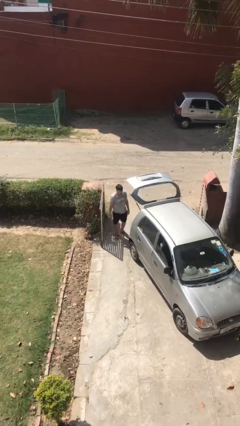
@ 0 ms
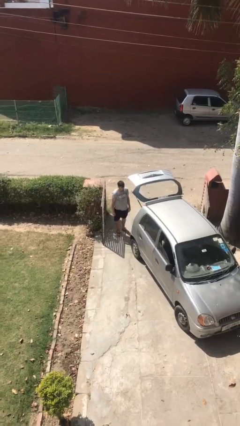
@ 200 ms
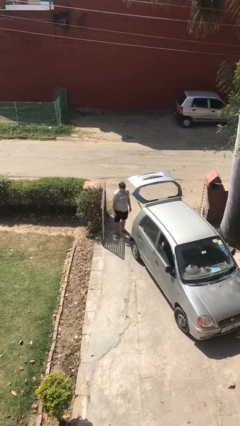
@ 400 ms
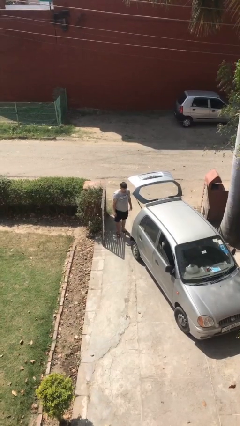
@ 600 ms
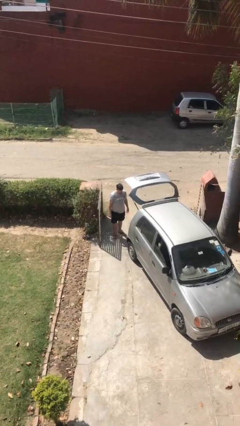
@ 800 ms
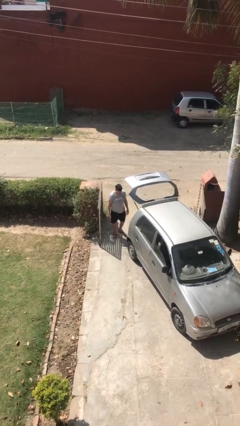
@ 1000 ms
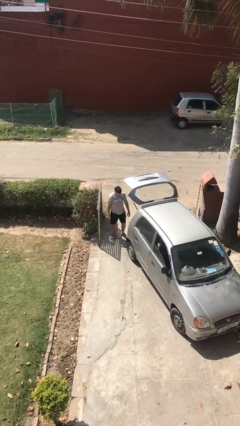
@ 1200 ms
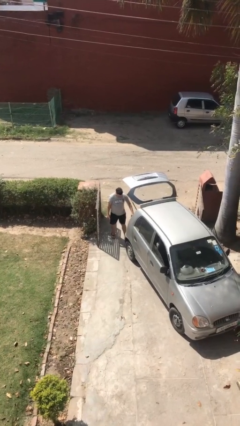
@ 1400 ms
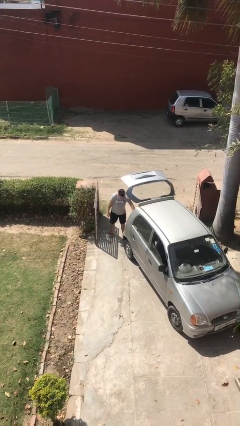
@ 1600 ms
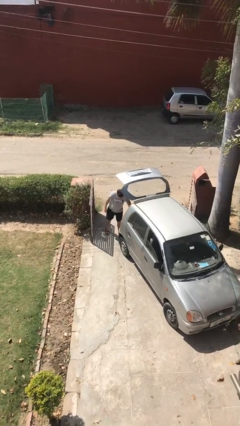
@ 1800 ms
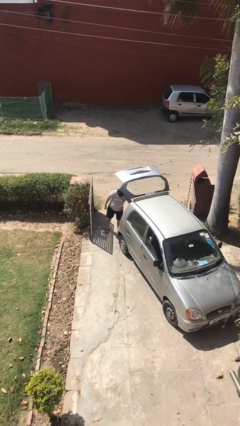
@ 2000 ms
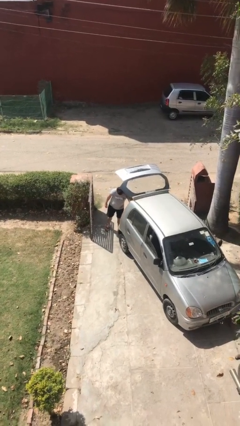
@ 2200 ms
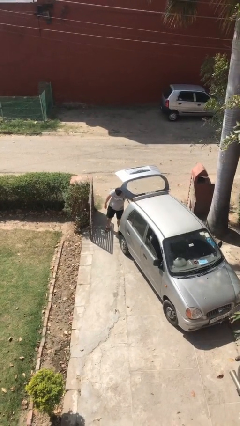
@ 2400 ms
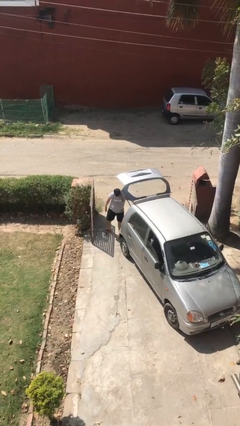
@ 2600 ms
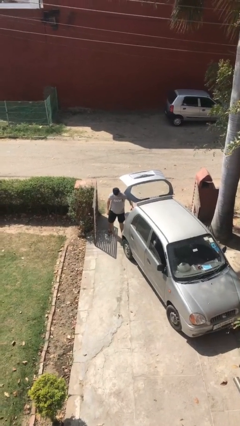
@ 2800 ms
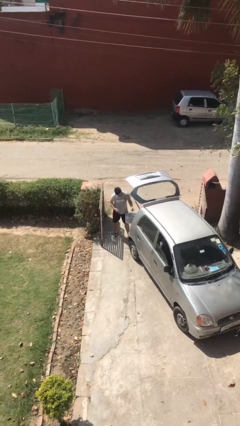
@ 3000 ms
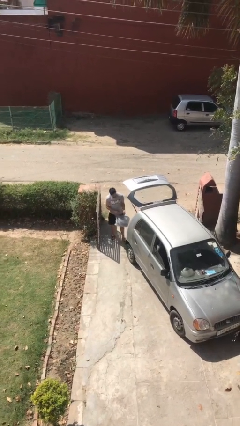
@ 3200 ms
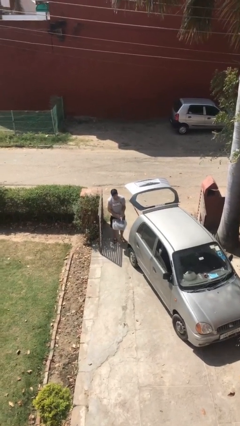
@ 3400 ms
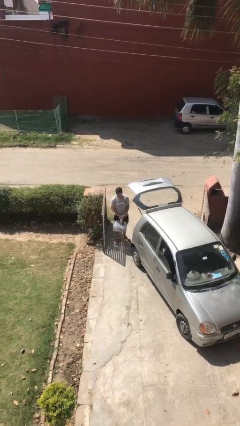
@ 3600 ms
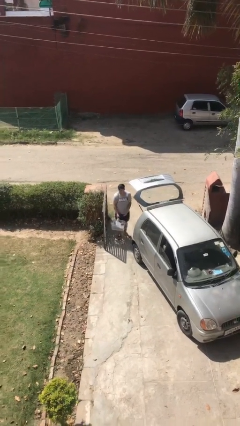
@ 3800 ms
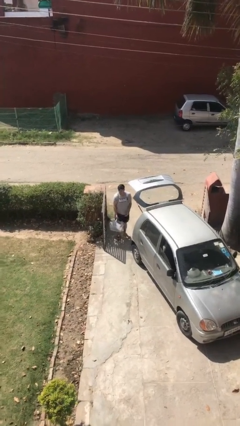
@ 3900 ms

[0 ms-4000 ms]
person unloads car

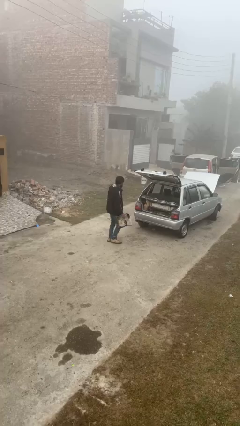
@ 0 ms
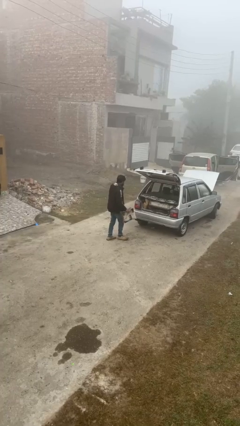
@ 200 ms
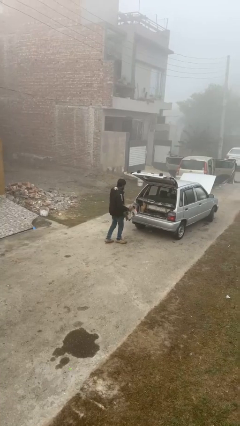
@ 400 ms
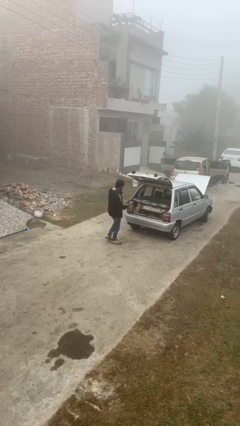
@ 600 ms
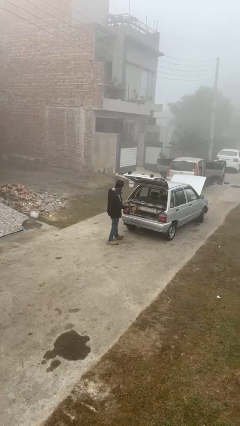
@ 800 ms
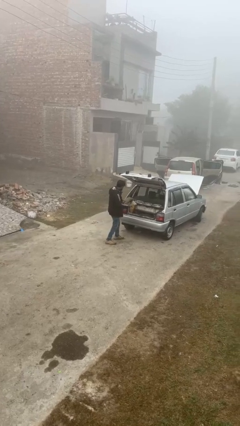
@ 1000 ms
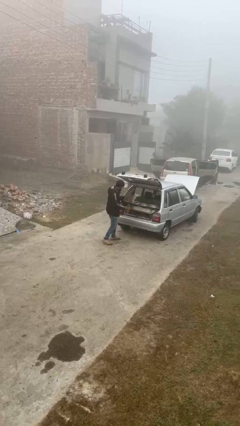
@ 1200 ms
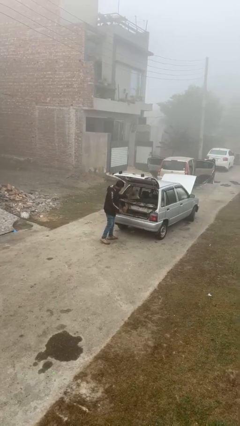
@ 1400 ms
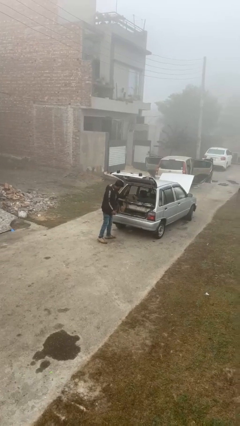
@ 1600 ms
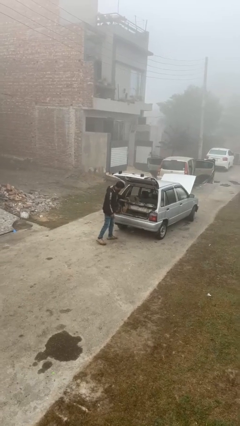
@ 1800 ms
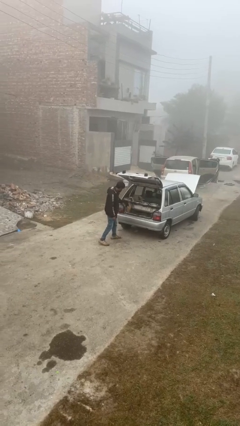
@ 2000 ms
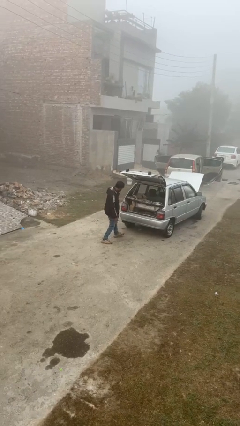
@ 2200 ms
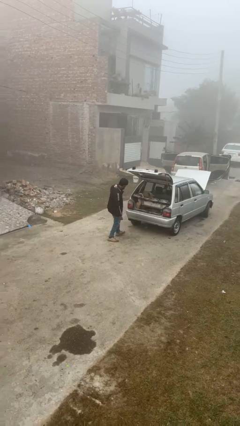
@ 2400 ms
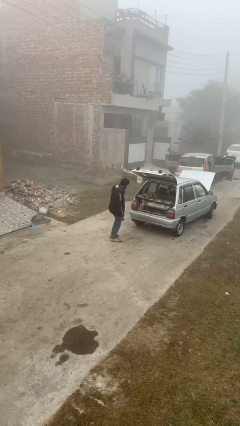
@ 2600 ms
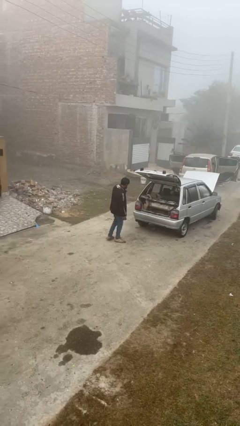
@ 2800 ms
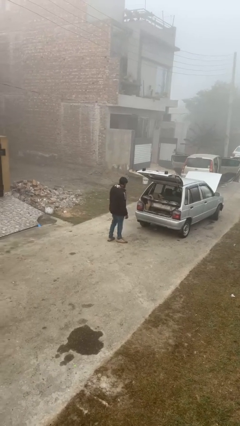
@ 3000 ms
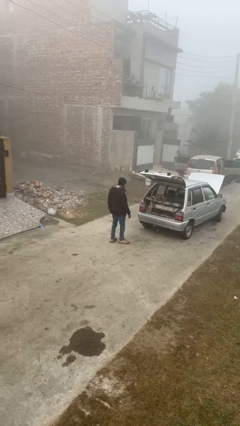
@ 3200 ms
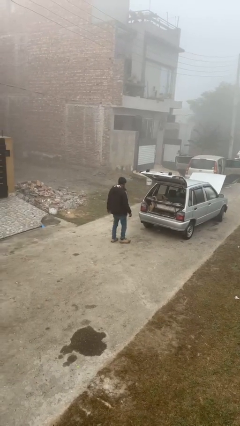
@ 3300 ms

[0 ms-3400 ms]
person loads car

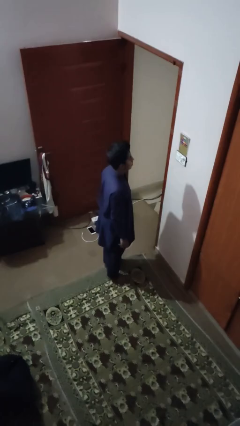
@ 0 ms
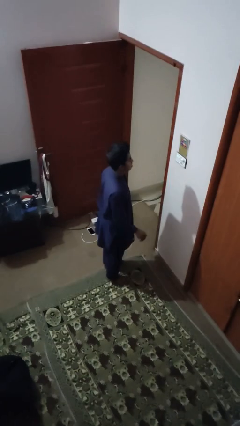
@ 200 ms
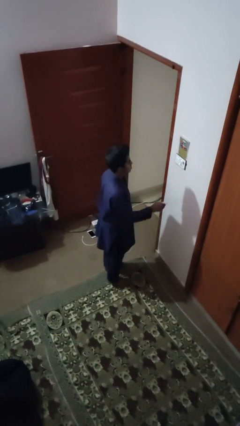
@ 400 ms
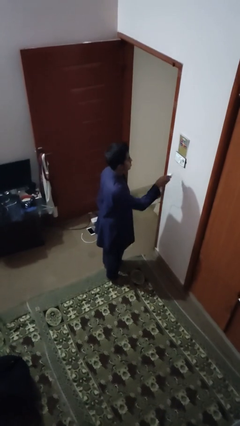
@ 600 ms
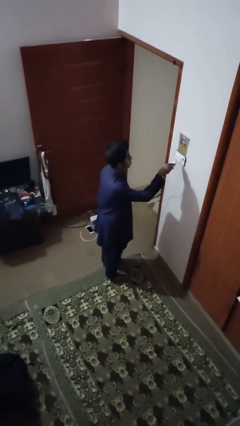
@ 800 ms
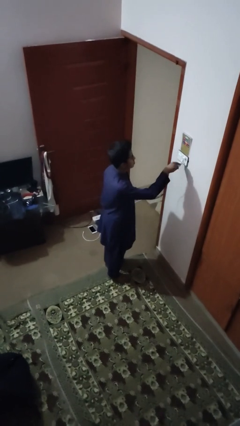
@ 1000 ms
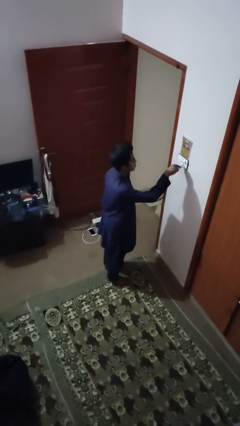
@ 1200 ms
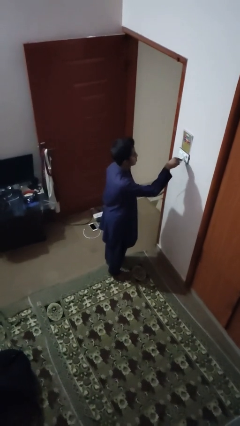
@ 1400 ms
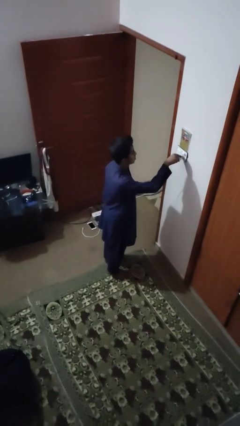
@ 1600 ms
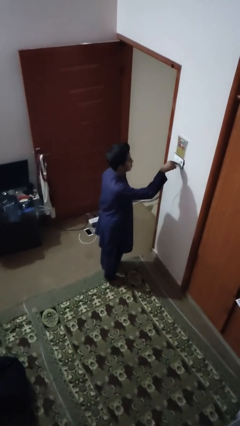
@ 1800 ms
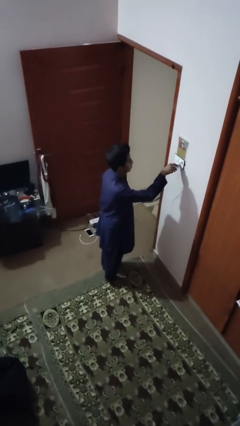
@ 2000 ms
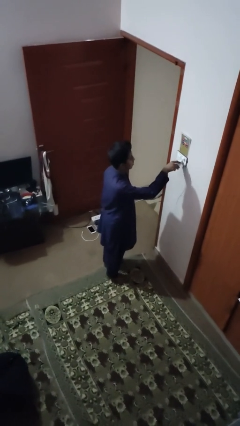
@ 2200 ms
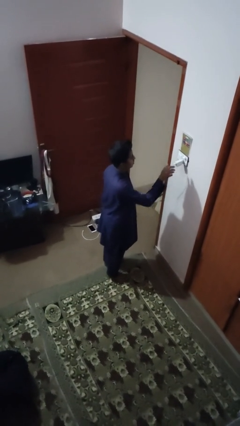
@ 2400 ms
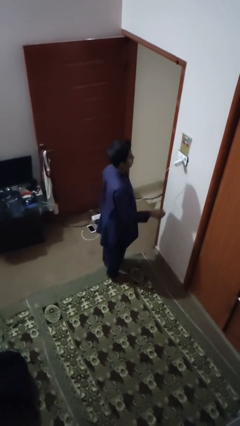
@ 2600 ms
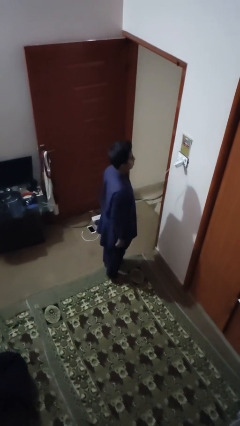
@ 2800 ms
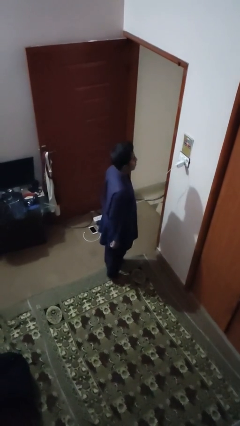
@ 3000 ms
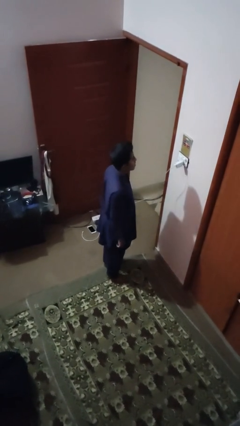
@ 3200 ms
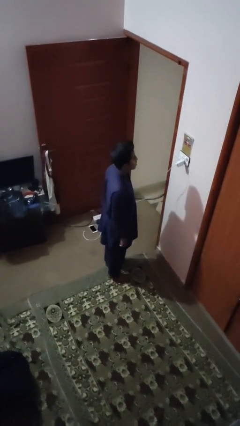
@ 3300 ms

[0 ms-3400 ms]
person plugs into electrical socket

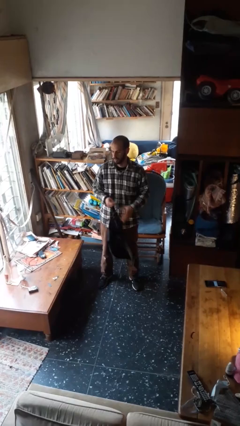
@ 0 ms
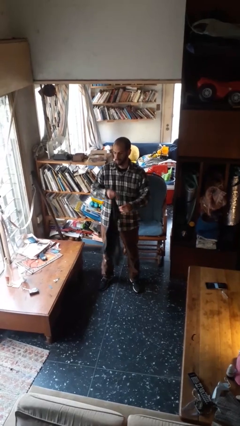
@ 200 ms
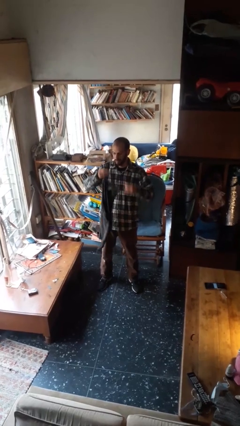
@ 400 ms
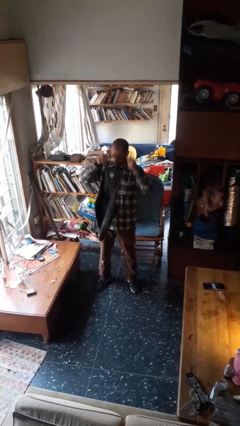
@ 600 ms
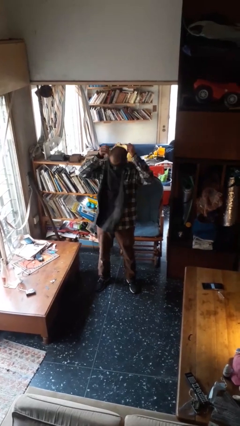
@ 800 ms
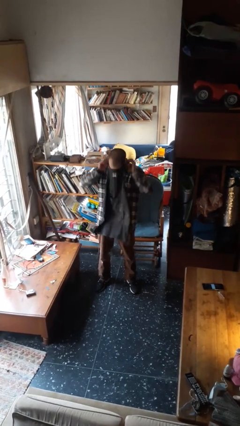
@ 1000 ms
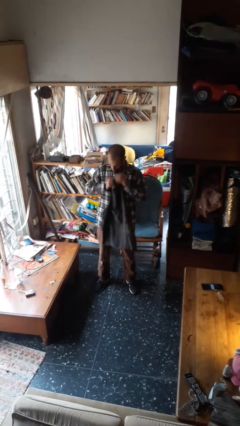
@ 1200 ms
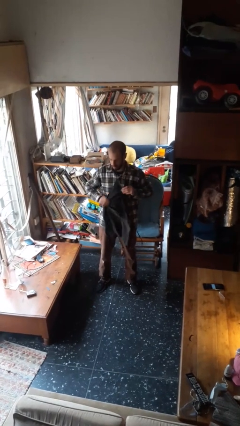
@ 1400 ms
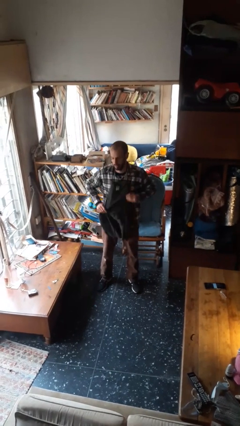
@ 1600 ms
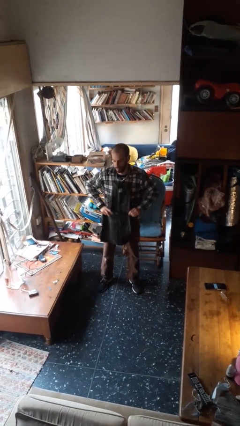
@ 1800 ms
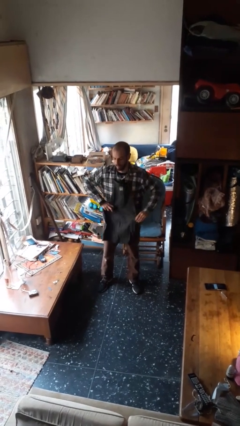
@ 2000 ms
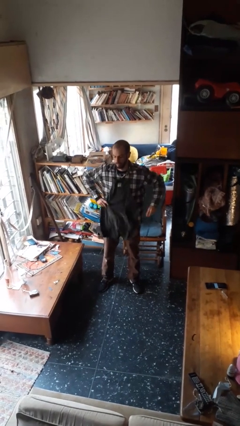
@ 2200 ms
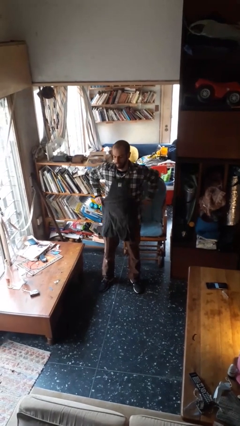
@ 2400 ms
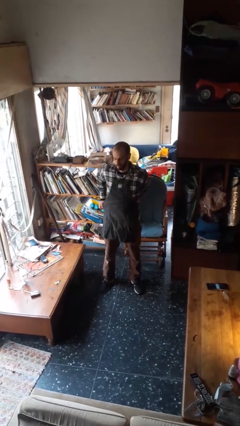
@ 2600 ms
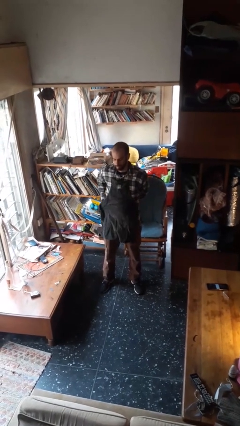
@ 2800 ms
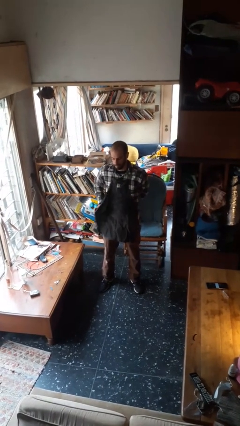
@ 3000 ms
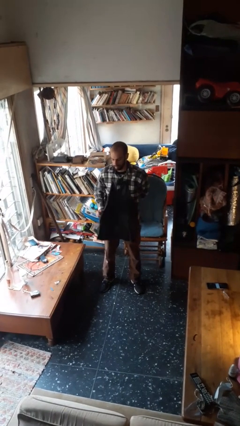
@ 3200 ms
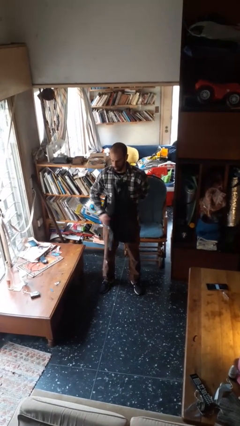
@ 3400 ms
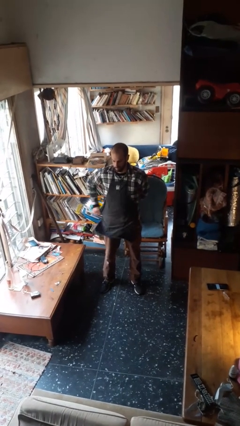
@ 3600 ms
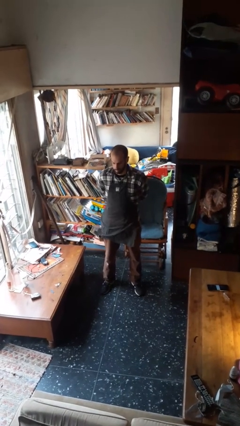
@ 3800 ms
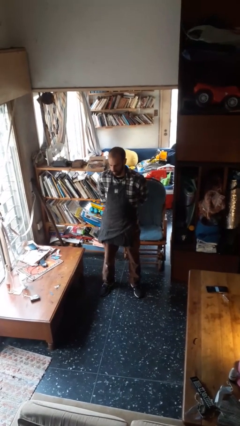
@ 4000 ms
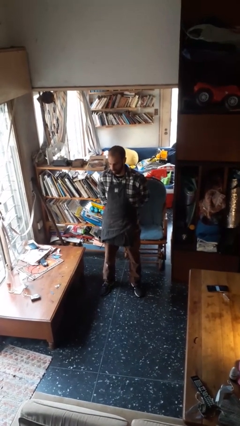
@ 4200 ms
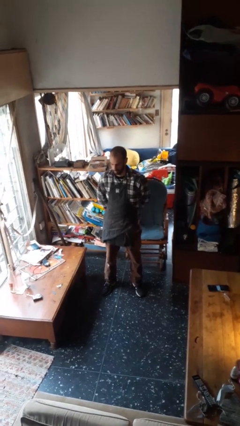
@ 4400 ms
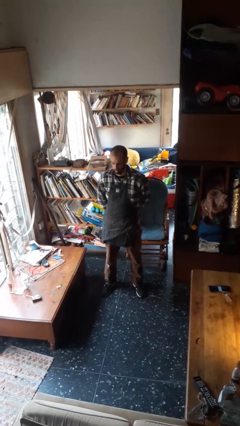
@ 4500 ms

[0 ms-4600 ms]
person puts on apron

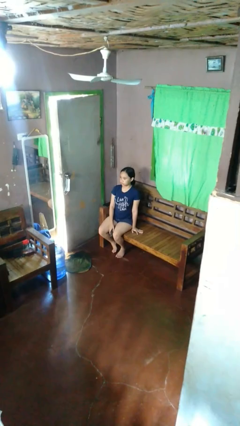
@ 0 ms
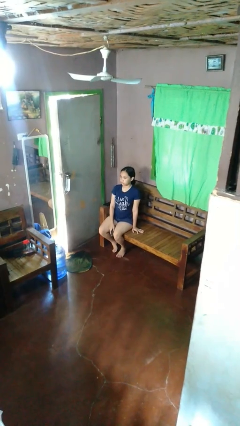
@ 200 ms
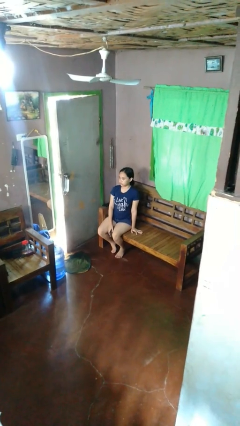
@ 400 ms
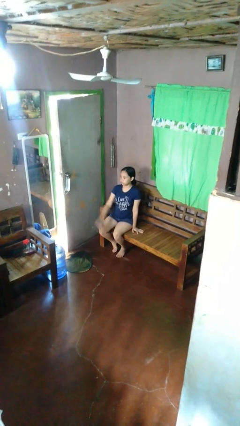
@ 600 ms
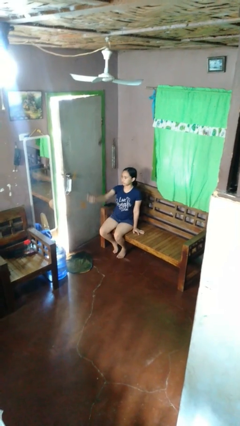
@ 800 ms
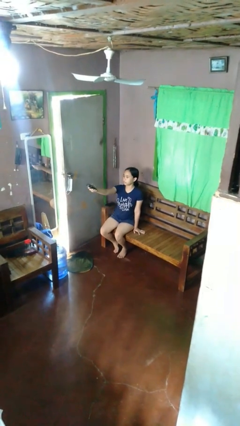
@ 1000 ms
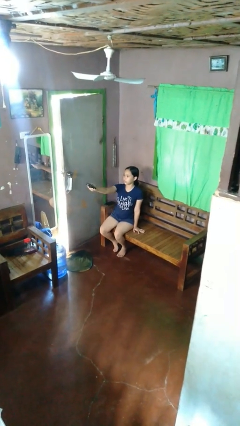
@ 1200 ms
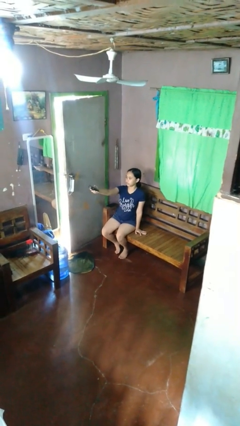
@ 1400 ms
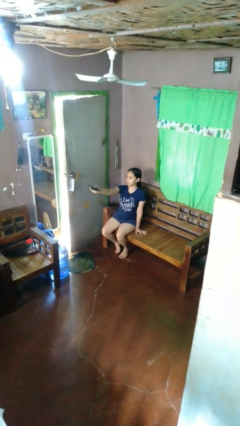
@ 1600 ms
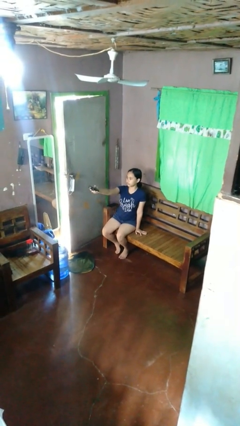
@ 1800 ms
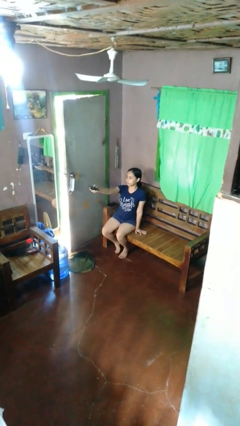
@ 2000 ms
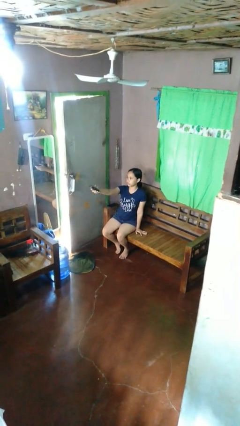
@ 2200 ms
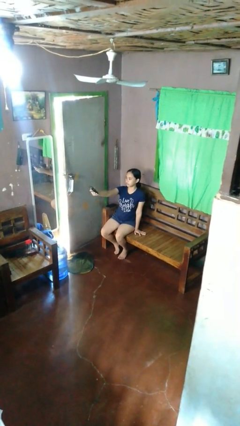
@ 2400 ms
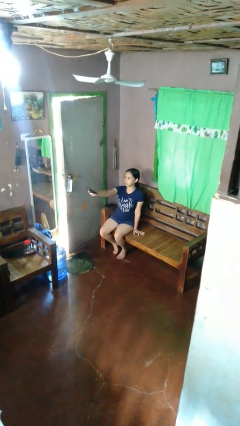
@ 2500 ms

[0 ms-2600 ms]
person uses television remote
